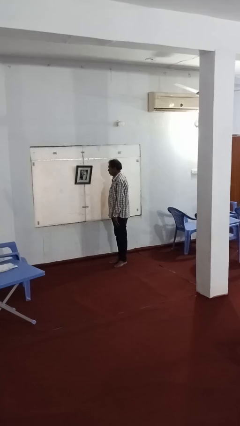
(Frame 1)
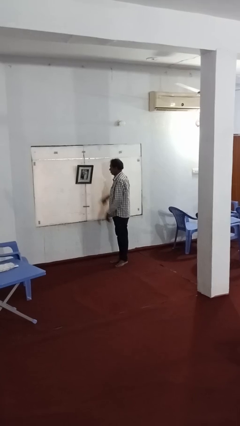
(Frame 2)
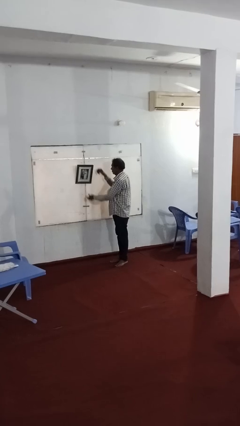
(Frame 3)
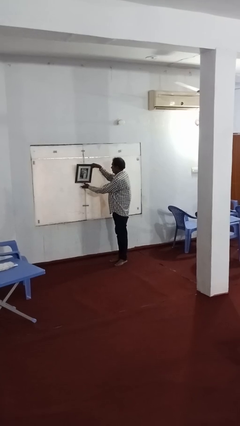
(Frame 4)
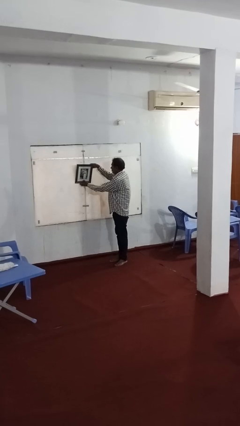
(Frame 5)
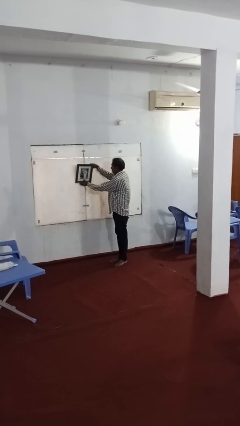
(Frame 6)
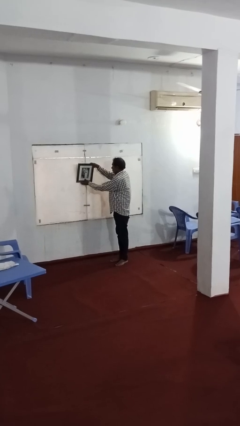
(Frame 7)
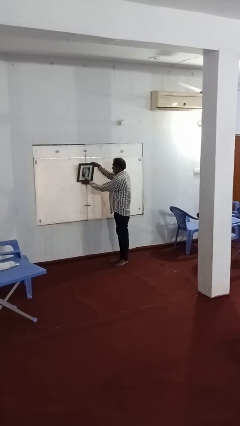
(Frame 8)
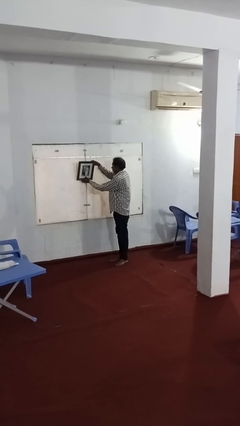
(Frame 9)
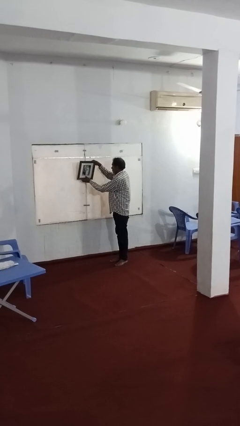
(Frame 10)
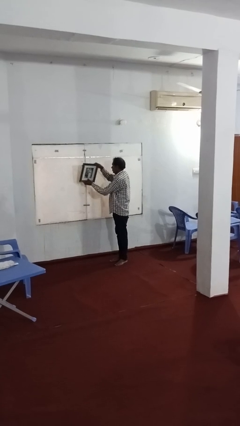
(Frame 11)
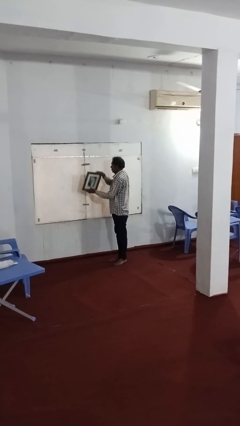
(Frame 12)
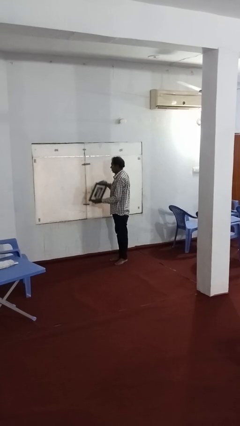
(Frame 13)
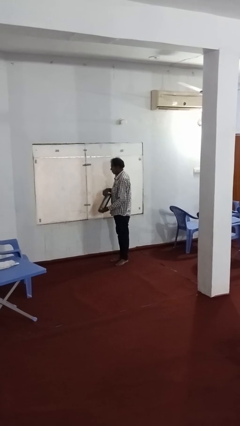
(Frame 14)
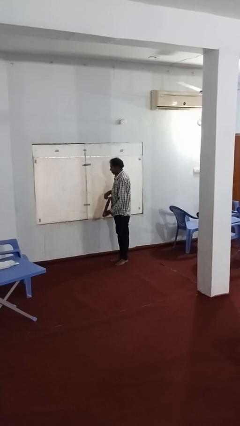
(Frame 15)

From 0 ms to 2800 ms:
person takes down picture frame

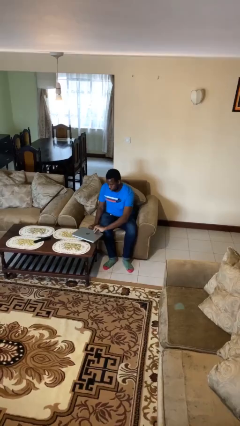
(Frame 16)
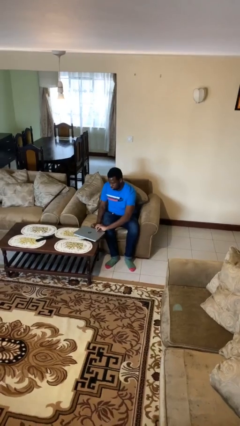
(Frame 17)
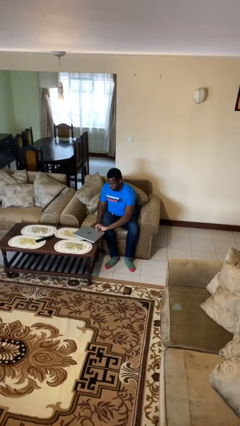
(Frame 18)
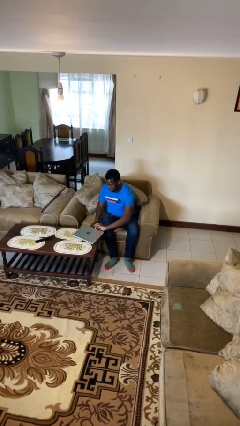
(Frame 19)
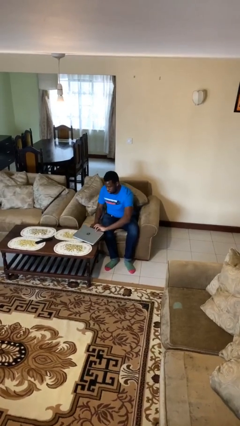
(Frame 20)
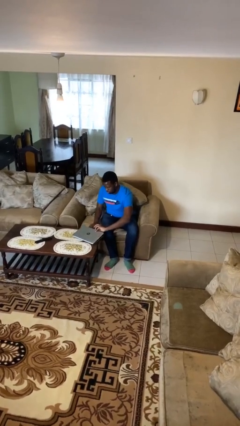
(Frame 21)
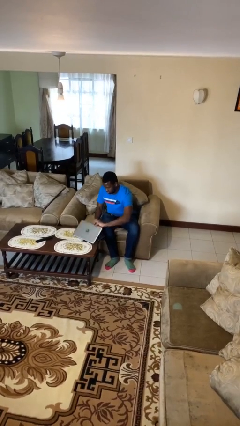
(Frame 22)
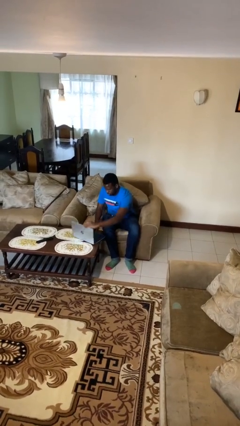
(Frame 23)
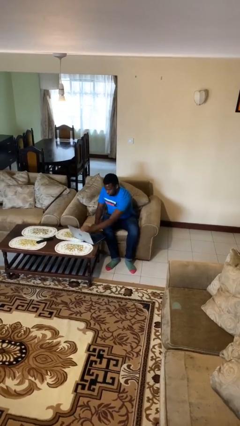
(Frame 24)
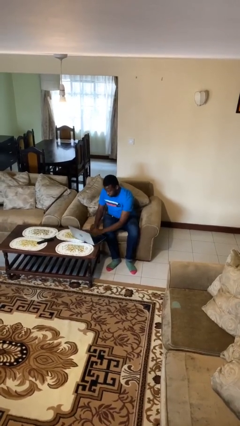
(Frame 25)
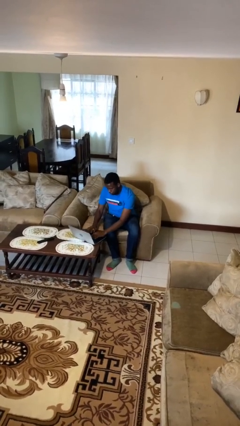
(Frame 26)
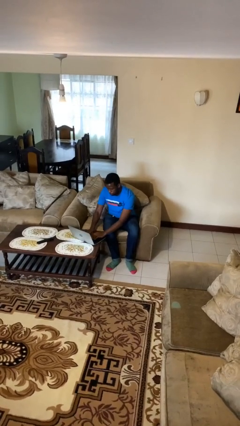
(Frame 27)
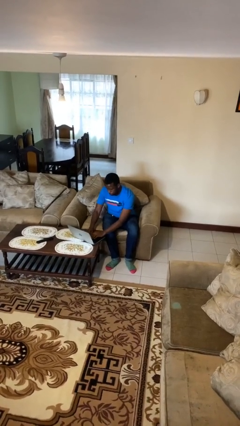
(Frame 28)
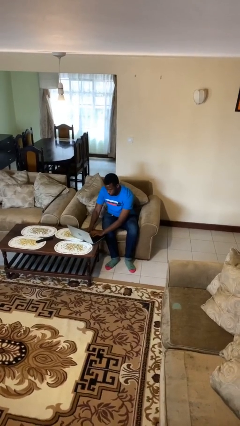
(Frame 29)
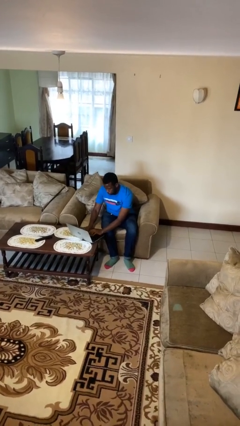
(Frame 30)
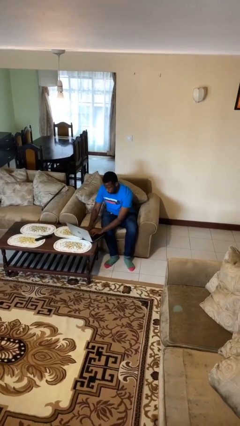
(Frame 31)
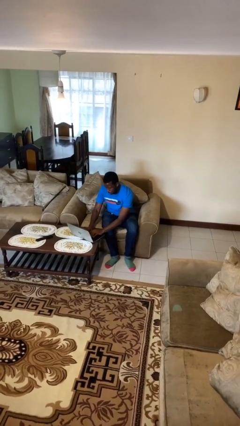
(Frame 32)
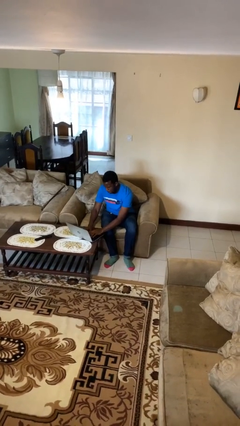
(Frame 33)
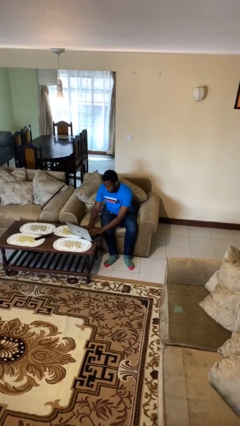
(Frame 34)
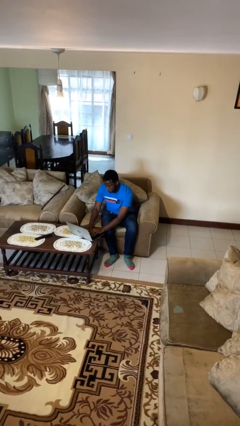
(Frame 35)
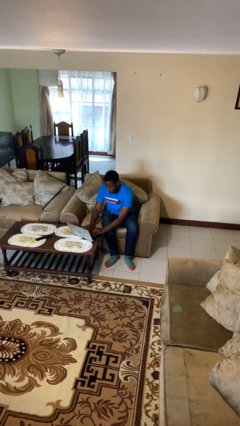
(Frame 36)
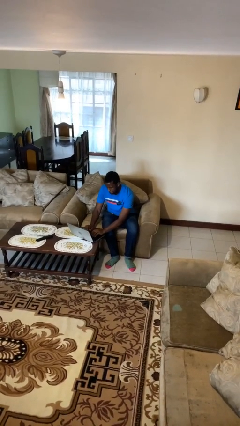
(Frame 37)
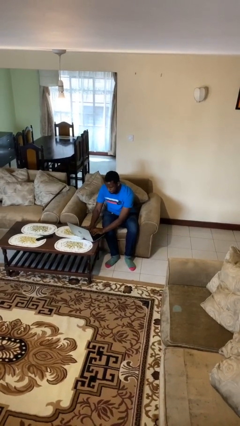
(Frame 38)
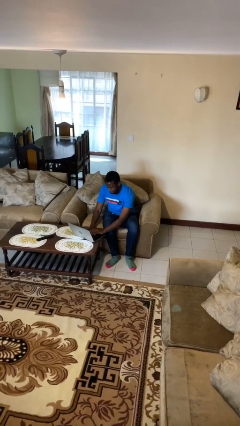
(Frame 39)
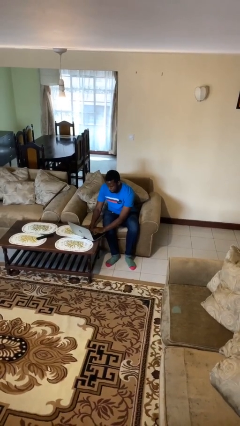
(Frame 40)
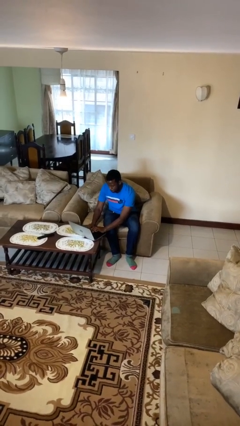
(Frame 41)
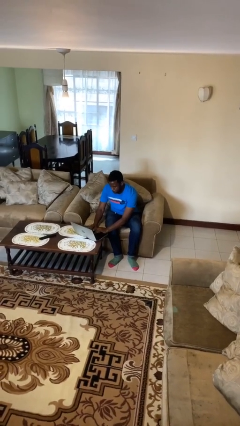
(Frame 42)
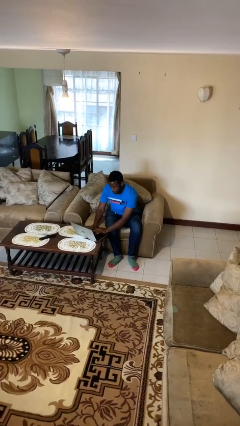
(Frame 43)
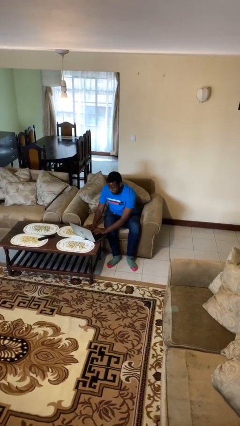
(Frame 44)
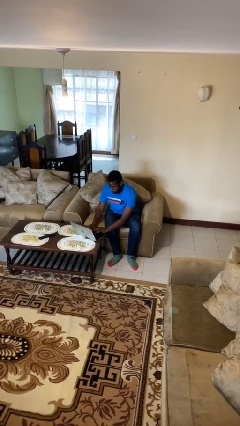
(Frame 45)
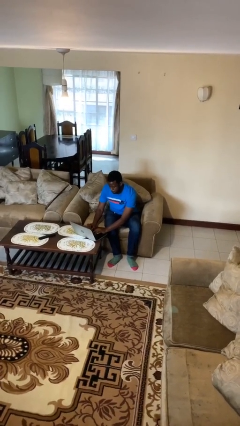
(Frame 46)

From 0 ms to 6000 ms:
person interacts with laptop

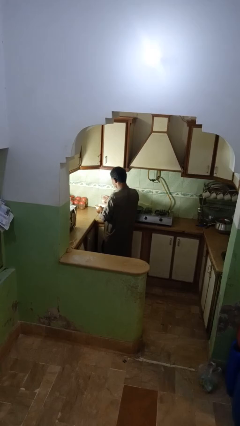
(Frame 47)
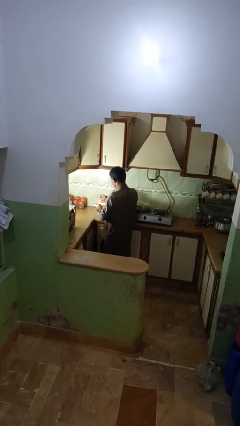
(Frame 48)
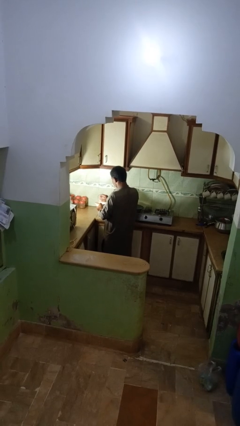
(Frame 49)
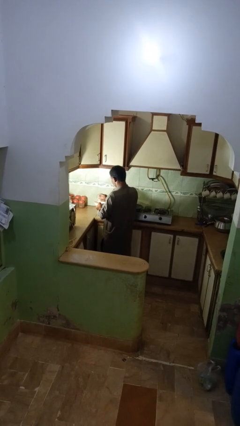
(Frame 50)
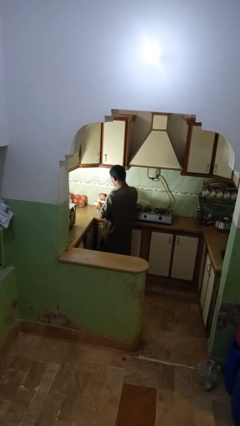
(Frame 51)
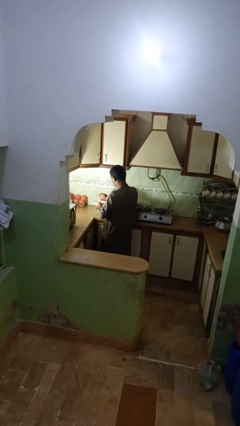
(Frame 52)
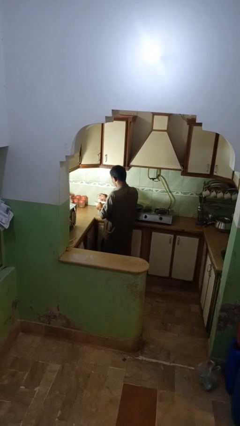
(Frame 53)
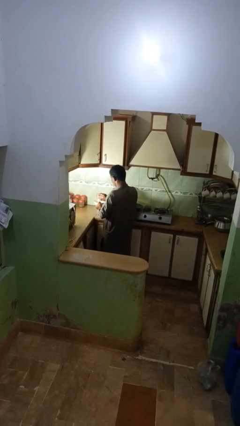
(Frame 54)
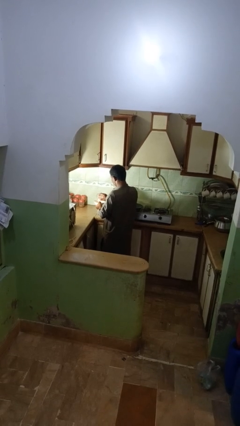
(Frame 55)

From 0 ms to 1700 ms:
person pours into bowl

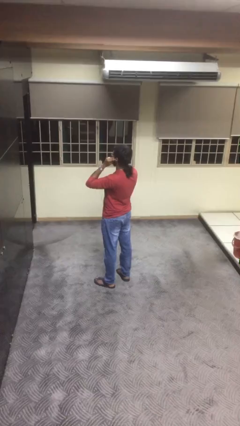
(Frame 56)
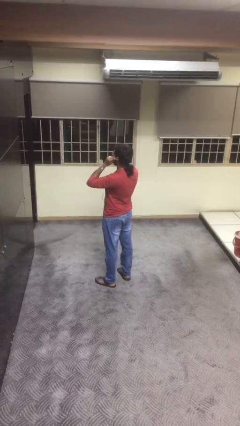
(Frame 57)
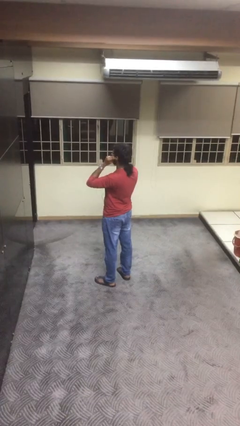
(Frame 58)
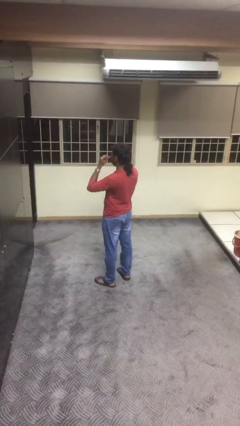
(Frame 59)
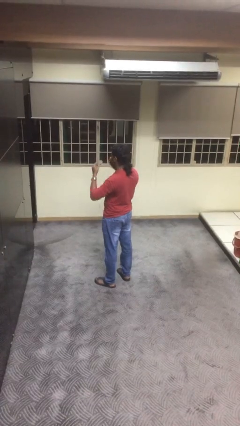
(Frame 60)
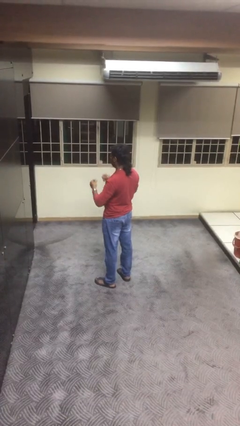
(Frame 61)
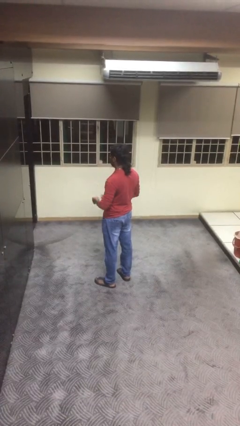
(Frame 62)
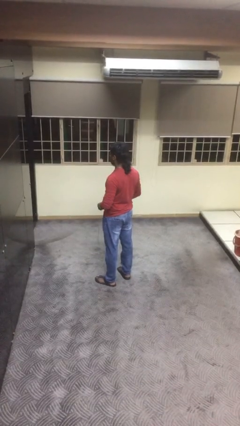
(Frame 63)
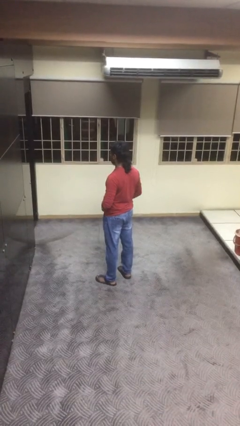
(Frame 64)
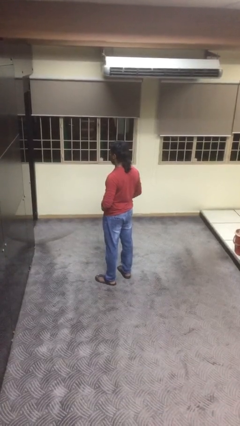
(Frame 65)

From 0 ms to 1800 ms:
person takes off headphones

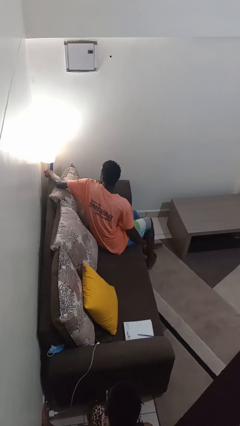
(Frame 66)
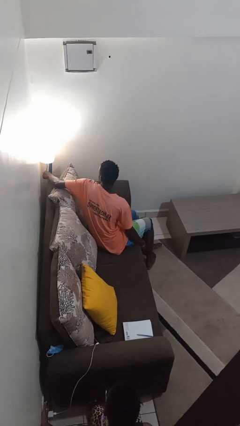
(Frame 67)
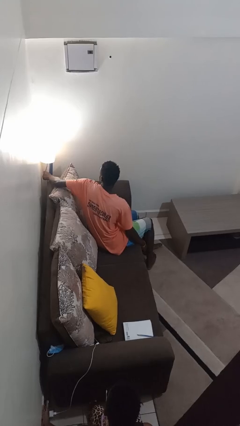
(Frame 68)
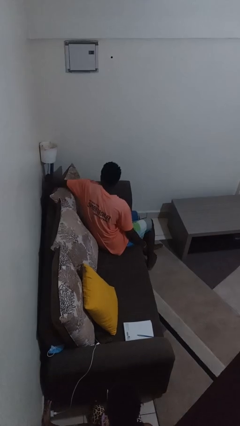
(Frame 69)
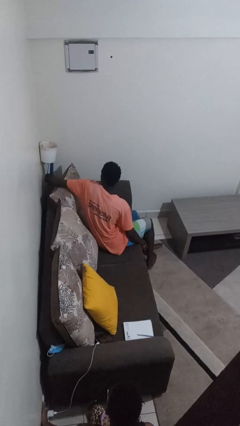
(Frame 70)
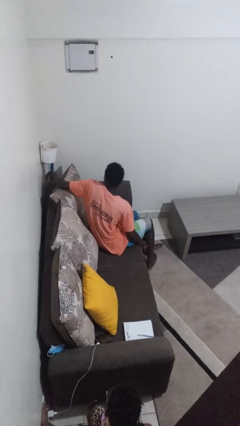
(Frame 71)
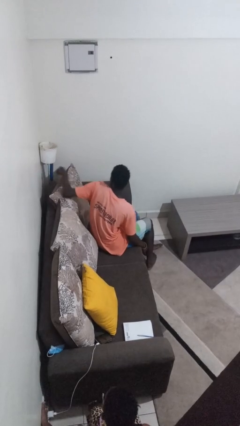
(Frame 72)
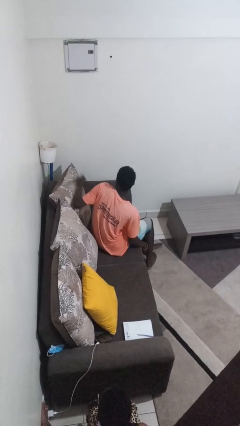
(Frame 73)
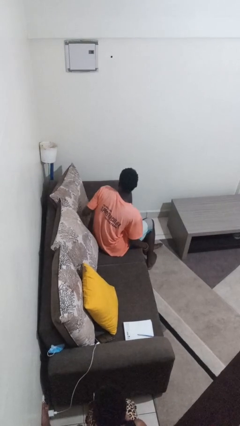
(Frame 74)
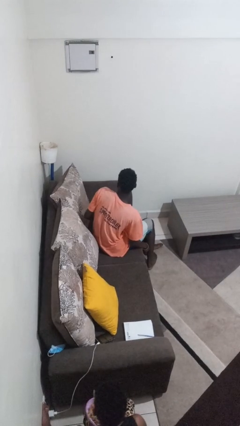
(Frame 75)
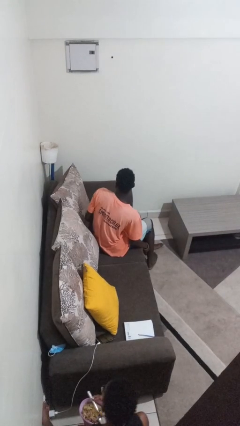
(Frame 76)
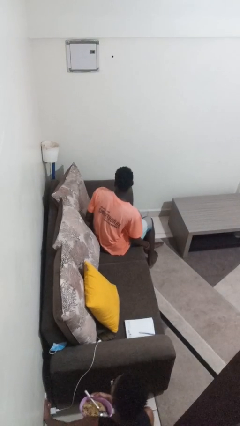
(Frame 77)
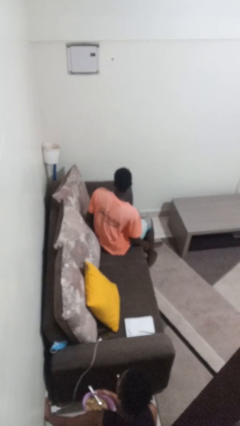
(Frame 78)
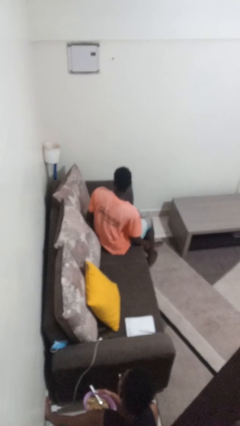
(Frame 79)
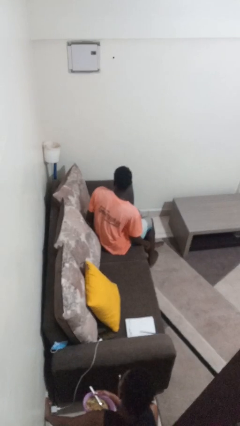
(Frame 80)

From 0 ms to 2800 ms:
person turns off lamp

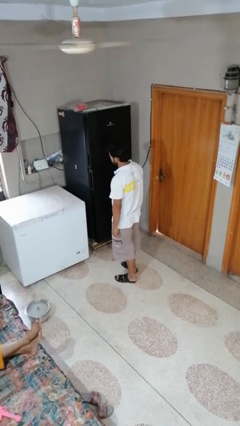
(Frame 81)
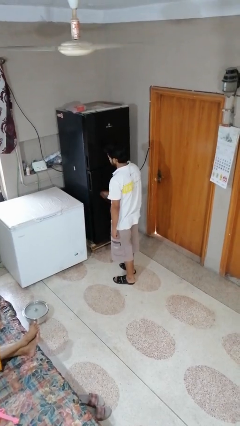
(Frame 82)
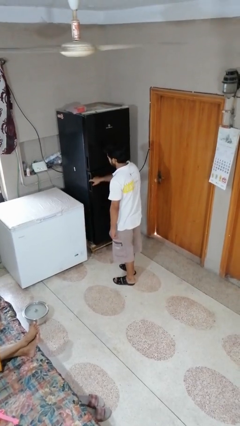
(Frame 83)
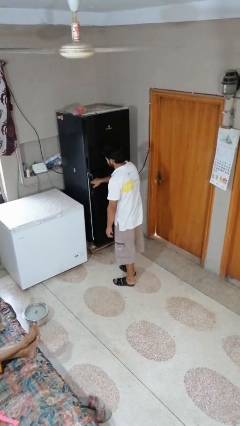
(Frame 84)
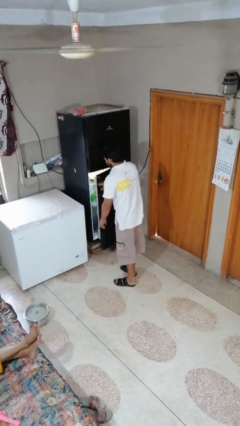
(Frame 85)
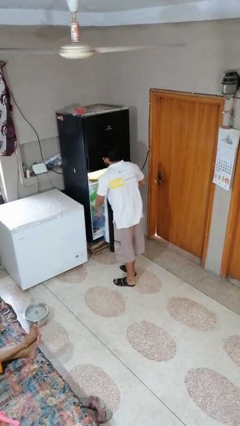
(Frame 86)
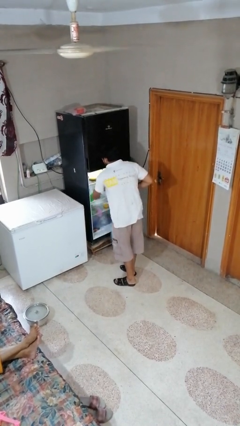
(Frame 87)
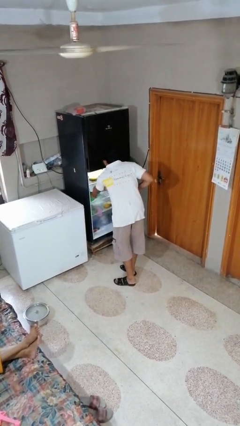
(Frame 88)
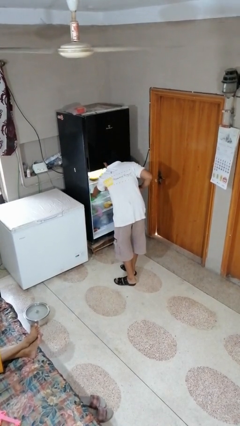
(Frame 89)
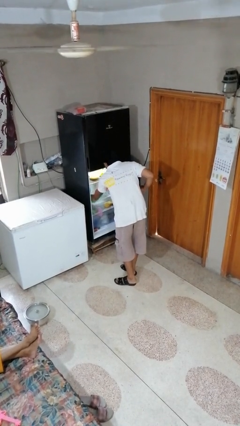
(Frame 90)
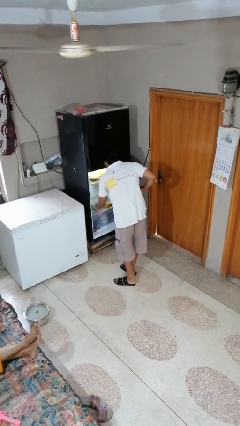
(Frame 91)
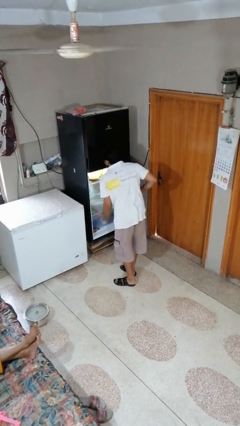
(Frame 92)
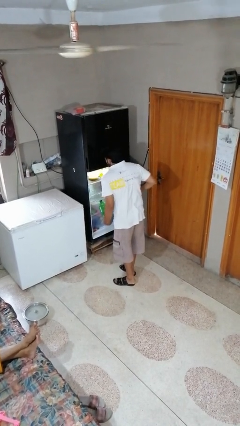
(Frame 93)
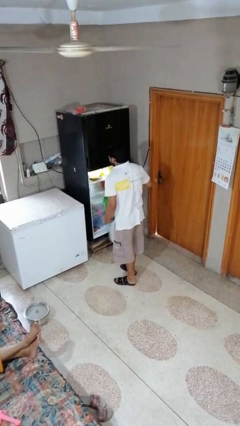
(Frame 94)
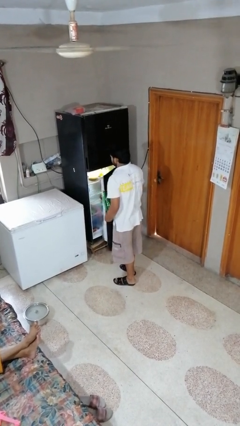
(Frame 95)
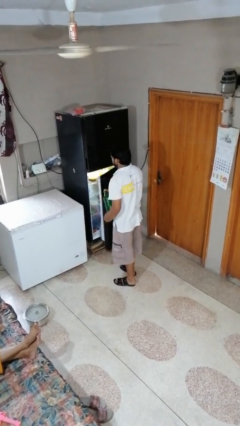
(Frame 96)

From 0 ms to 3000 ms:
person takes object from refrigerator
